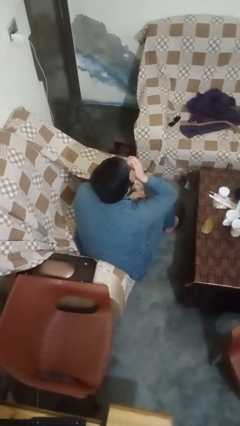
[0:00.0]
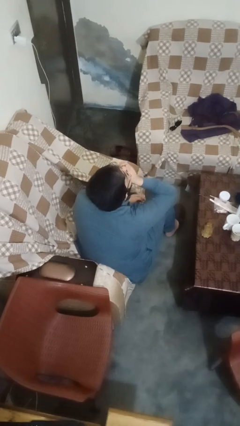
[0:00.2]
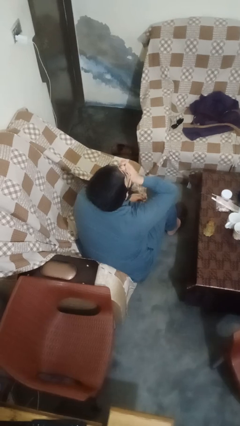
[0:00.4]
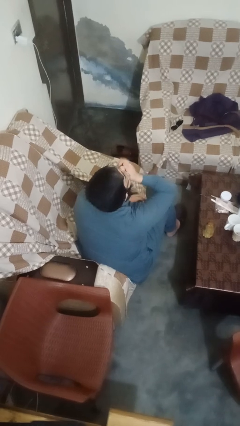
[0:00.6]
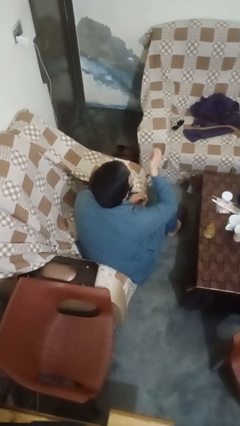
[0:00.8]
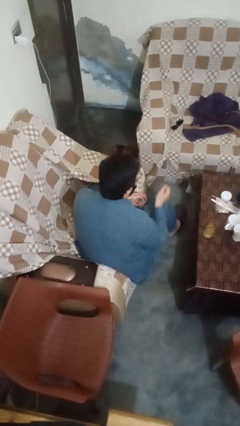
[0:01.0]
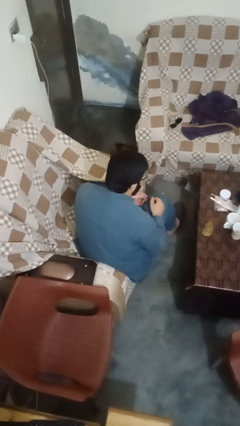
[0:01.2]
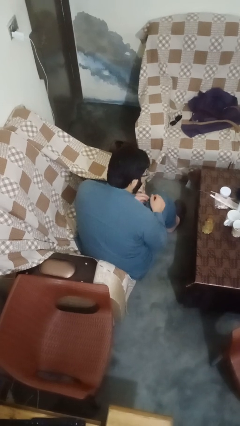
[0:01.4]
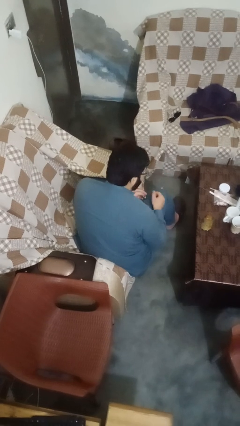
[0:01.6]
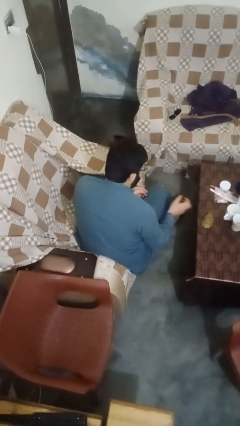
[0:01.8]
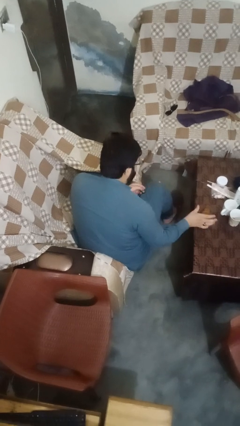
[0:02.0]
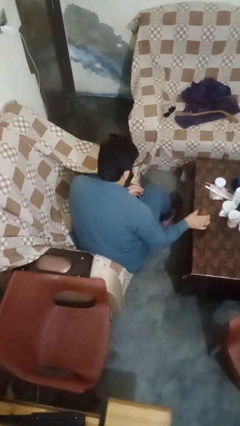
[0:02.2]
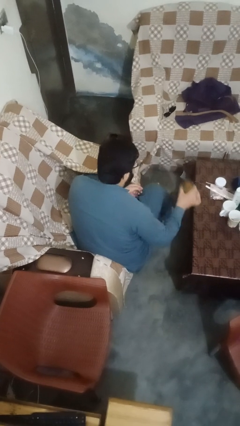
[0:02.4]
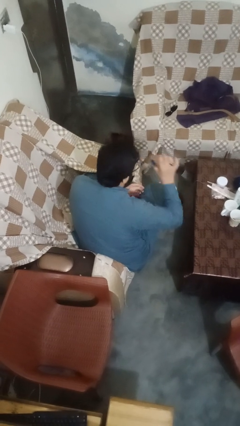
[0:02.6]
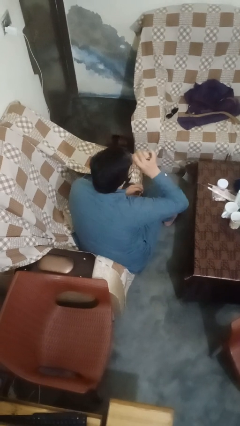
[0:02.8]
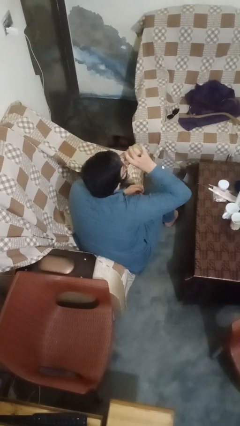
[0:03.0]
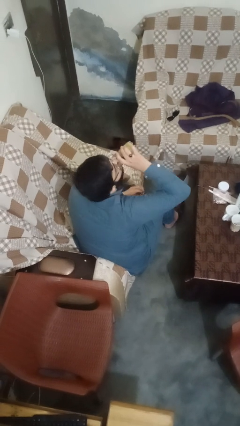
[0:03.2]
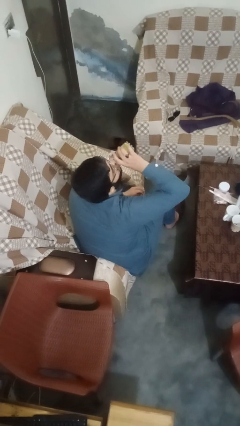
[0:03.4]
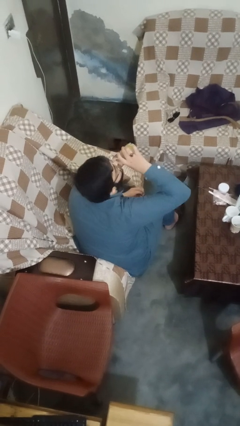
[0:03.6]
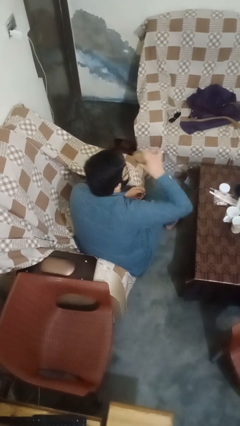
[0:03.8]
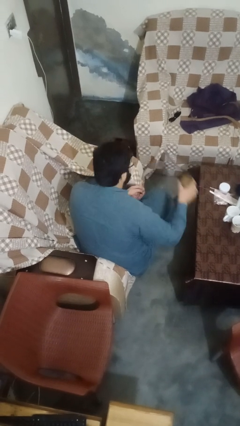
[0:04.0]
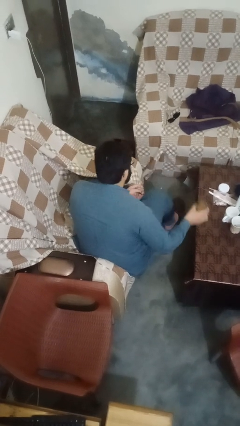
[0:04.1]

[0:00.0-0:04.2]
person drinks from cup

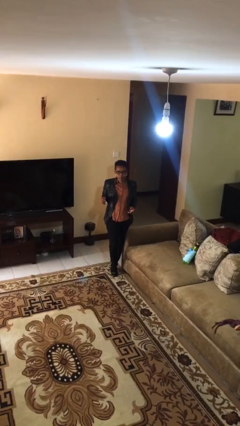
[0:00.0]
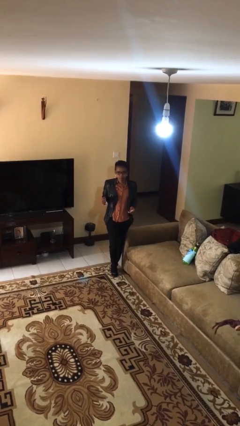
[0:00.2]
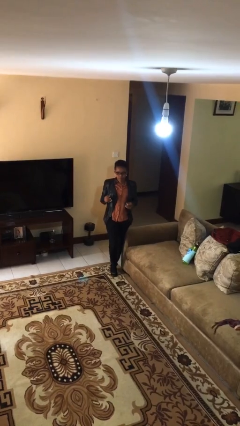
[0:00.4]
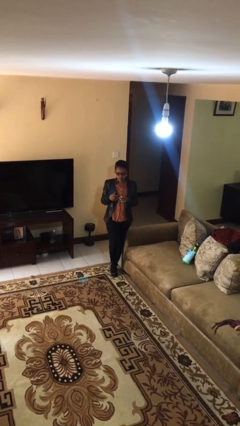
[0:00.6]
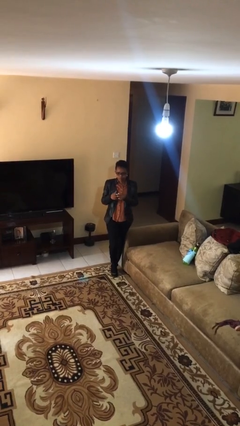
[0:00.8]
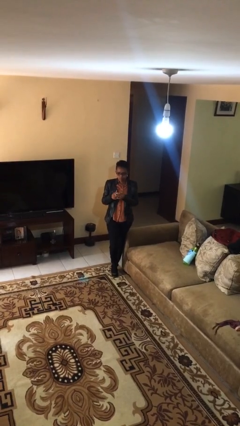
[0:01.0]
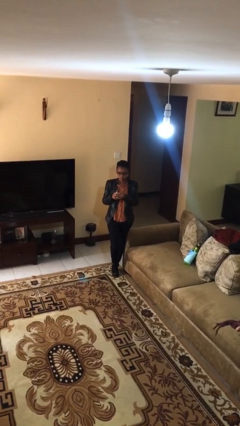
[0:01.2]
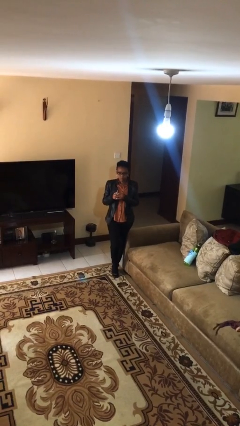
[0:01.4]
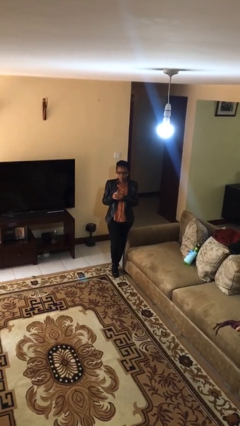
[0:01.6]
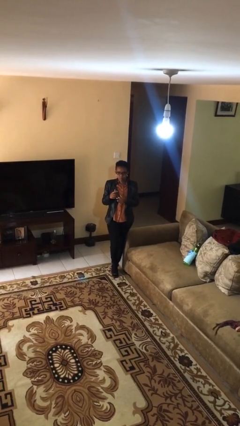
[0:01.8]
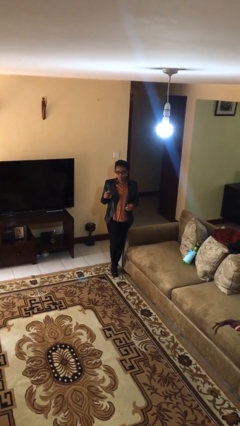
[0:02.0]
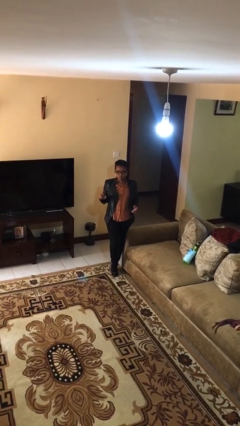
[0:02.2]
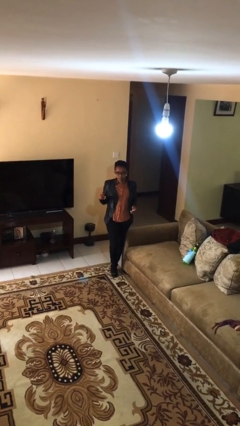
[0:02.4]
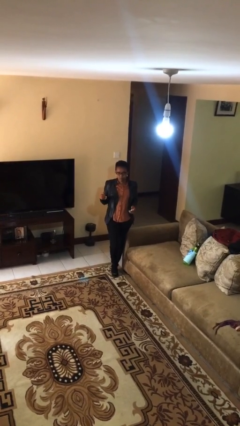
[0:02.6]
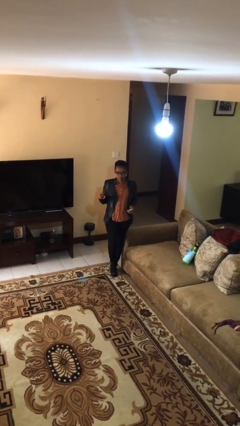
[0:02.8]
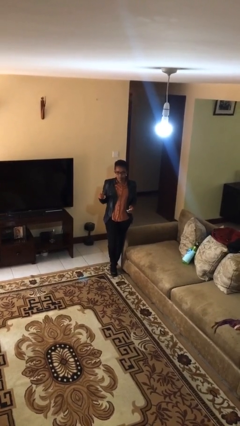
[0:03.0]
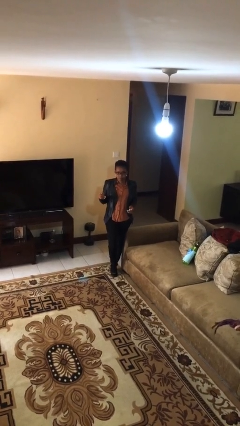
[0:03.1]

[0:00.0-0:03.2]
person puts on ring

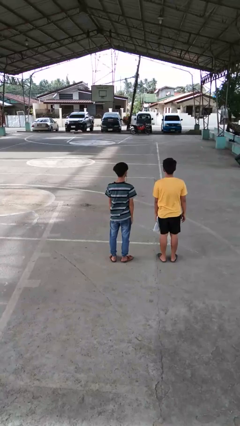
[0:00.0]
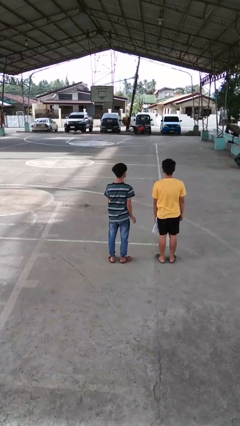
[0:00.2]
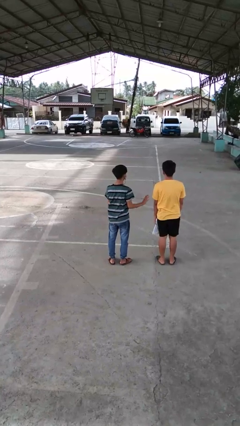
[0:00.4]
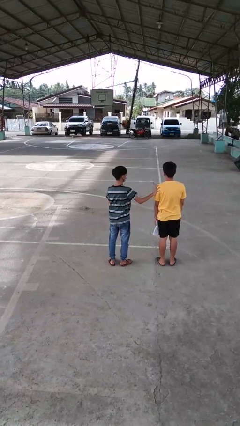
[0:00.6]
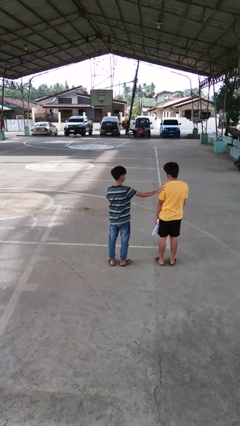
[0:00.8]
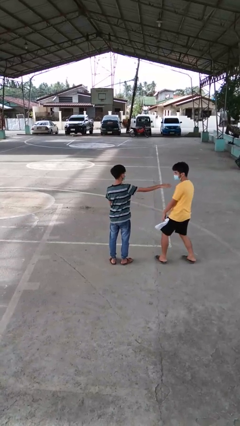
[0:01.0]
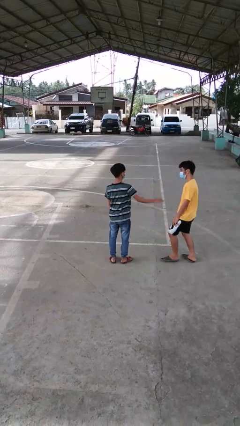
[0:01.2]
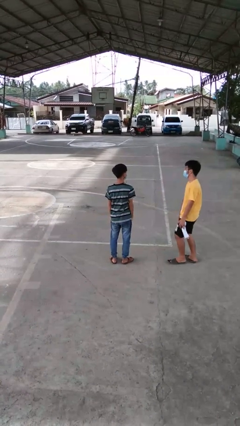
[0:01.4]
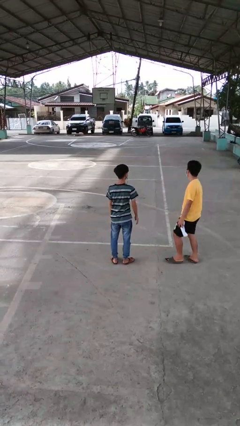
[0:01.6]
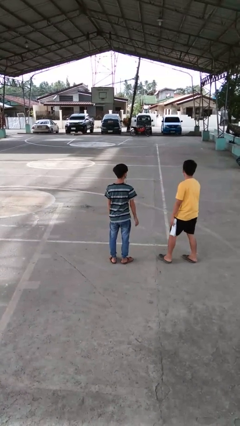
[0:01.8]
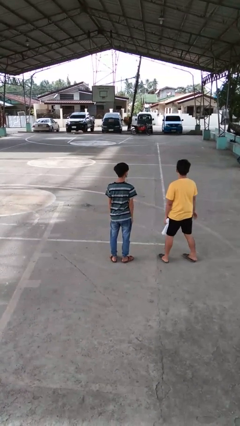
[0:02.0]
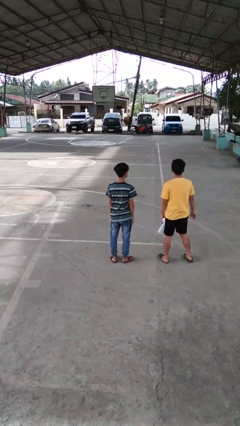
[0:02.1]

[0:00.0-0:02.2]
person shoves person

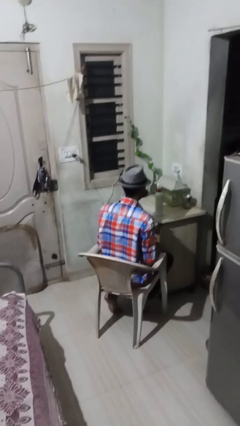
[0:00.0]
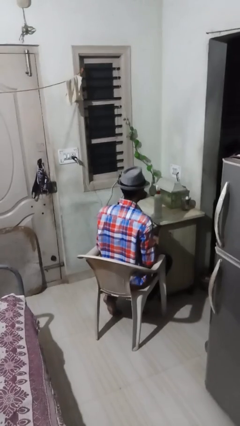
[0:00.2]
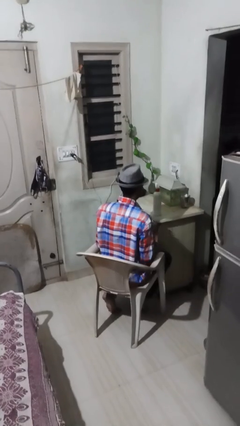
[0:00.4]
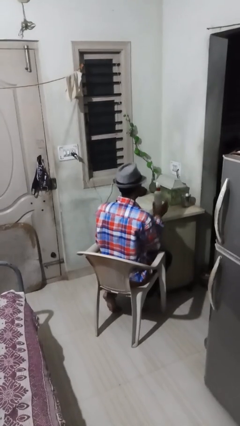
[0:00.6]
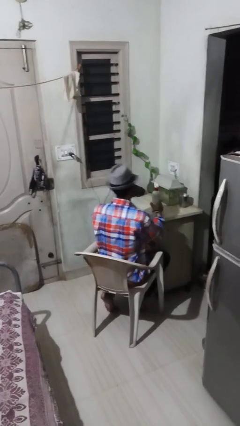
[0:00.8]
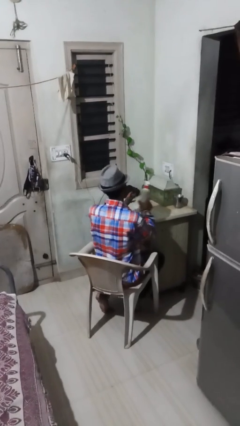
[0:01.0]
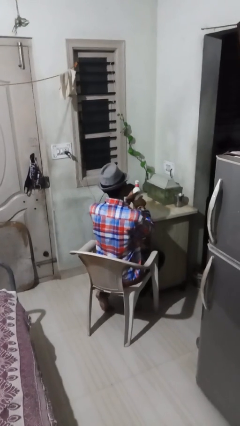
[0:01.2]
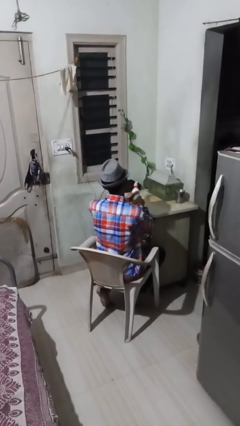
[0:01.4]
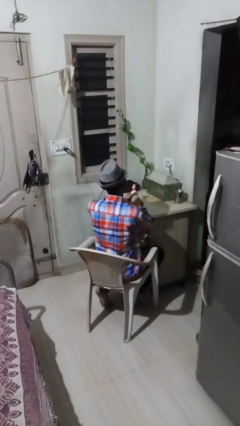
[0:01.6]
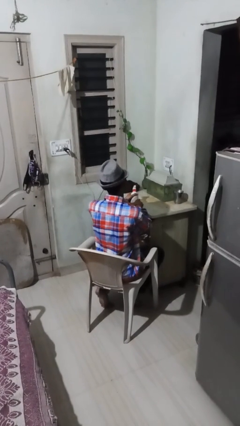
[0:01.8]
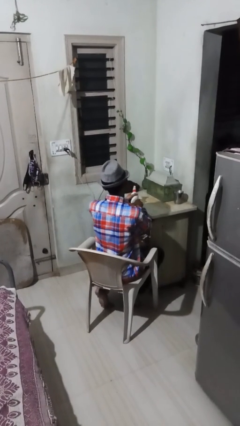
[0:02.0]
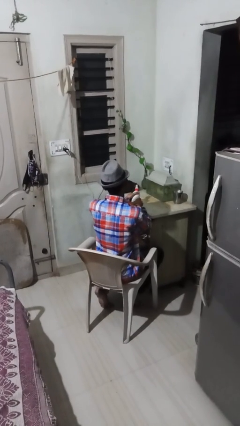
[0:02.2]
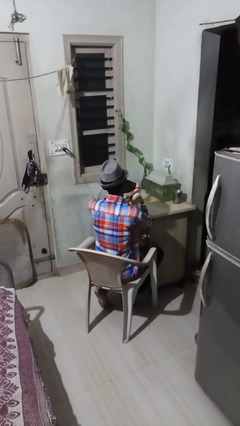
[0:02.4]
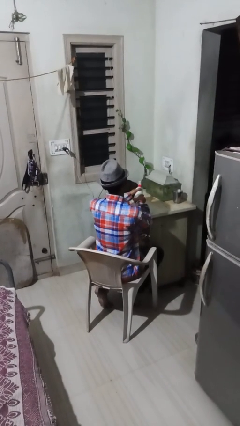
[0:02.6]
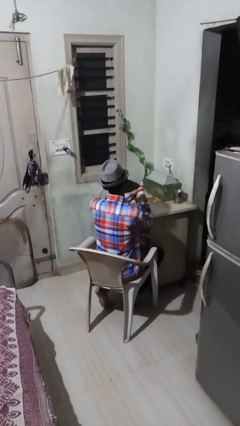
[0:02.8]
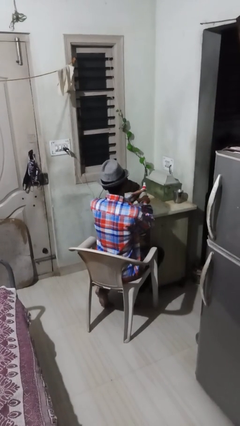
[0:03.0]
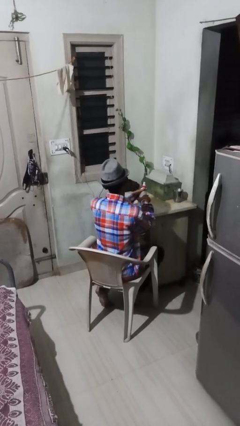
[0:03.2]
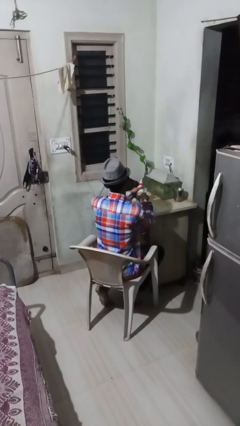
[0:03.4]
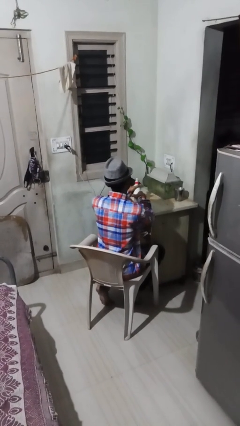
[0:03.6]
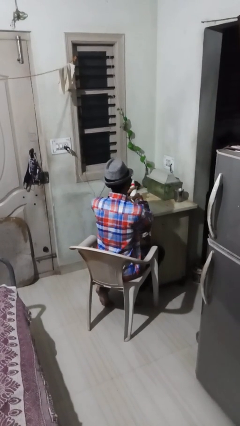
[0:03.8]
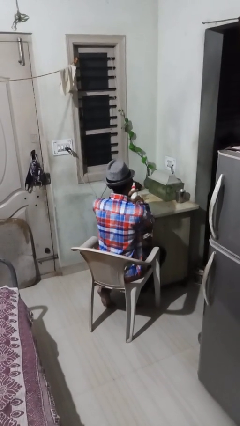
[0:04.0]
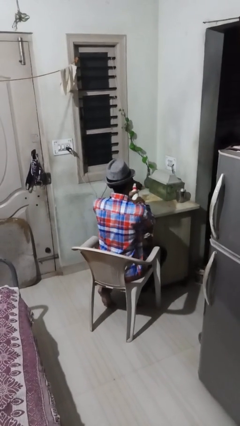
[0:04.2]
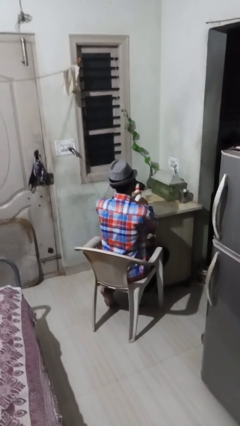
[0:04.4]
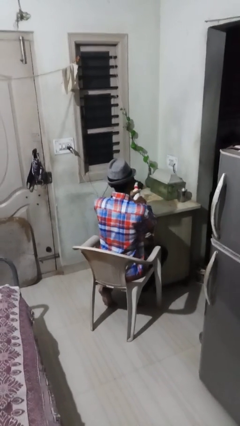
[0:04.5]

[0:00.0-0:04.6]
person sprays from bottle

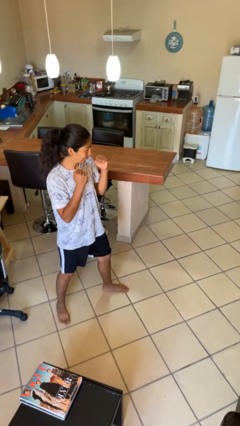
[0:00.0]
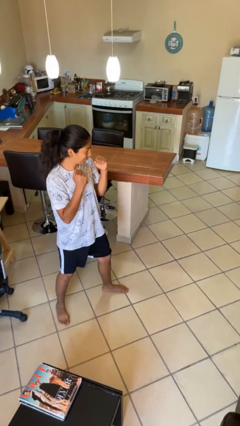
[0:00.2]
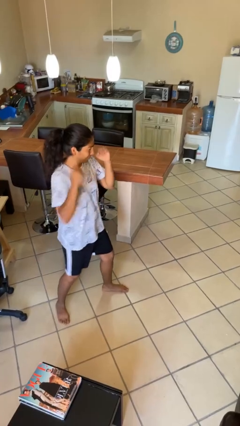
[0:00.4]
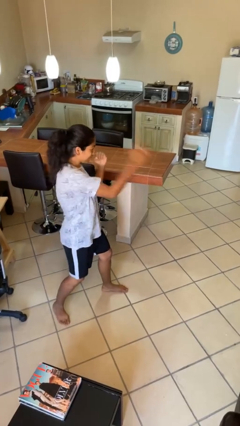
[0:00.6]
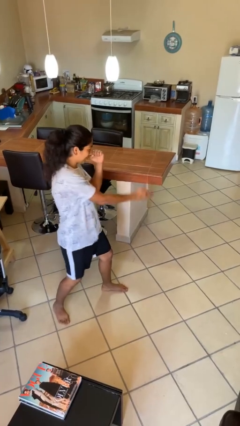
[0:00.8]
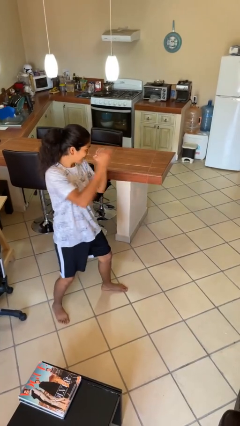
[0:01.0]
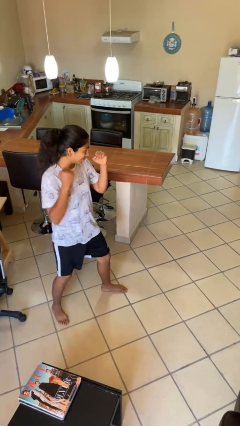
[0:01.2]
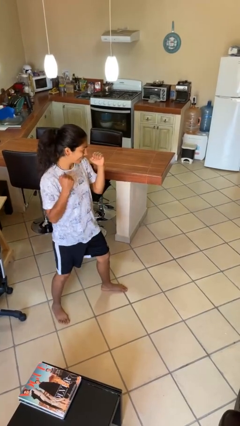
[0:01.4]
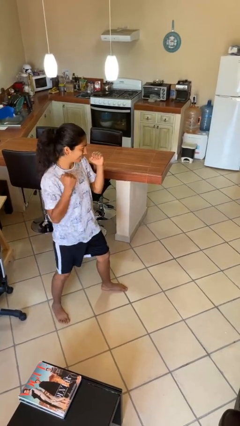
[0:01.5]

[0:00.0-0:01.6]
person karate chop

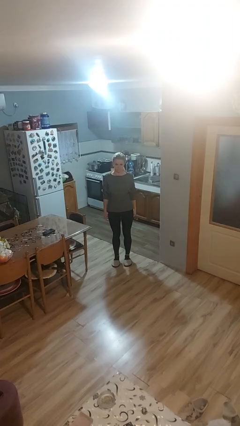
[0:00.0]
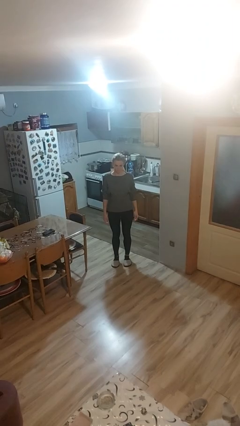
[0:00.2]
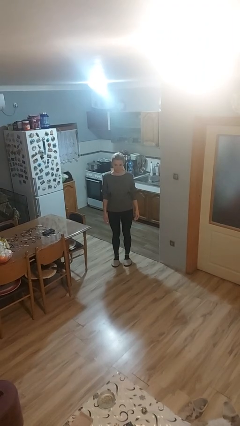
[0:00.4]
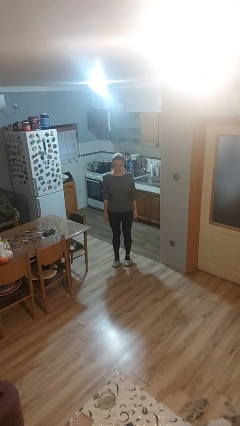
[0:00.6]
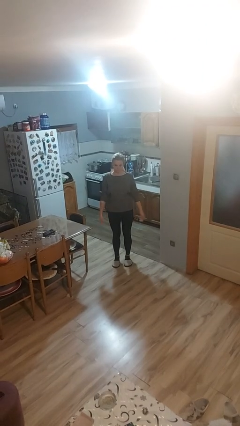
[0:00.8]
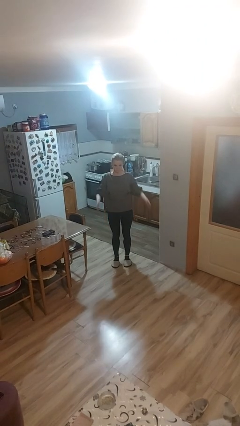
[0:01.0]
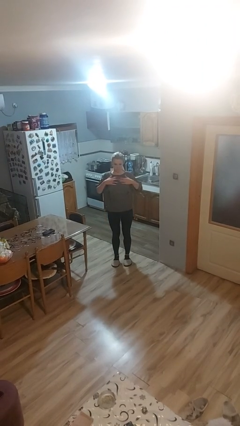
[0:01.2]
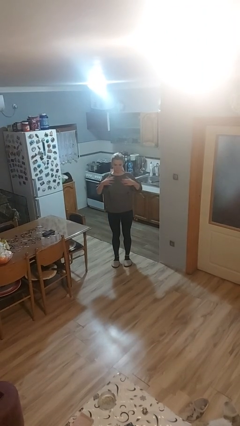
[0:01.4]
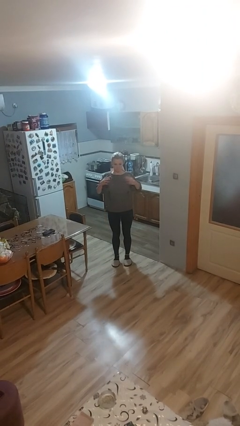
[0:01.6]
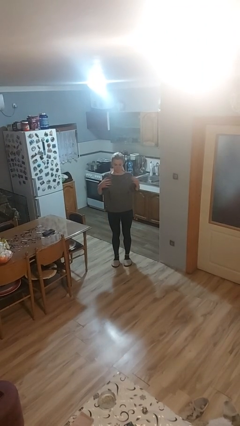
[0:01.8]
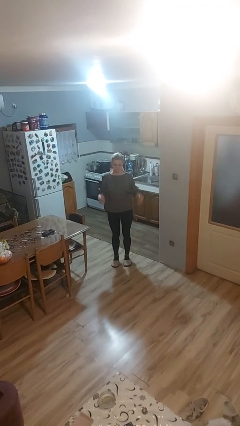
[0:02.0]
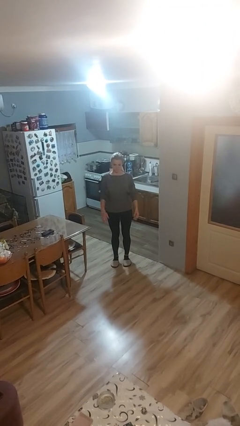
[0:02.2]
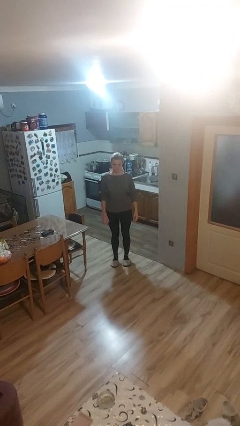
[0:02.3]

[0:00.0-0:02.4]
person drums on chest
